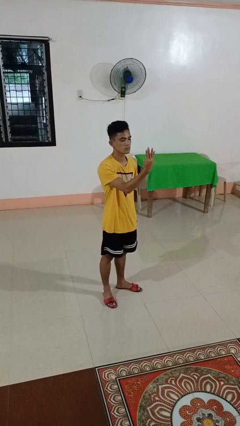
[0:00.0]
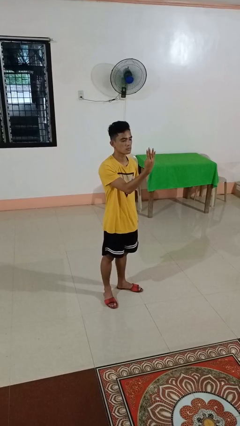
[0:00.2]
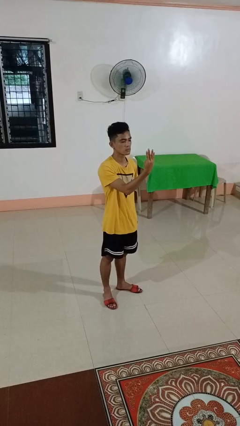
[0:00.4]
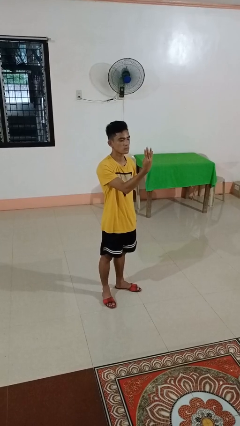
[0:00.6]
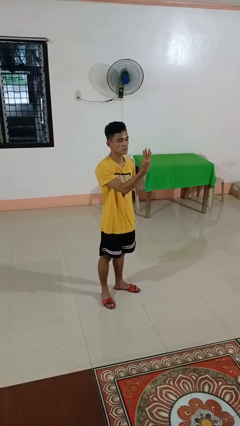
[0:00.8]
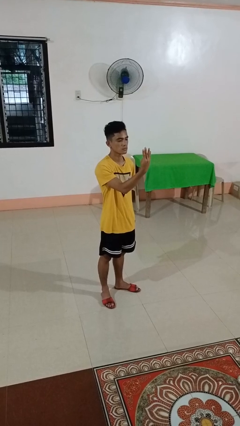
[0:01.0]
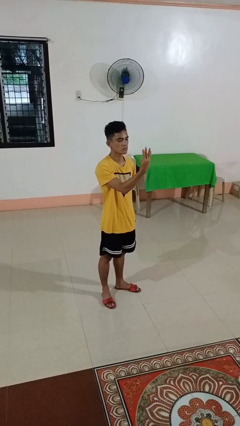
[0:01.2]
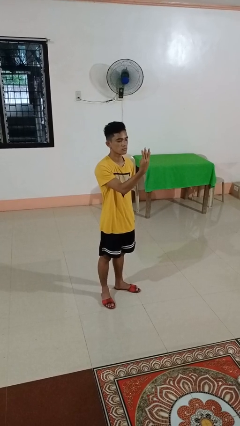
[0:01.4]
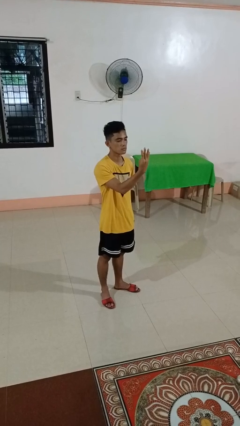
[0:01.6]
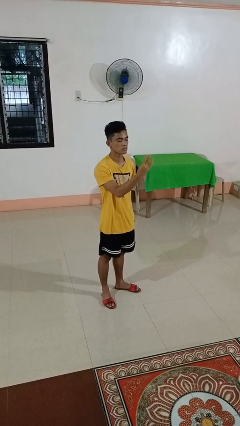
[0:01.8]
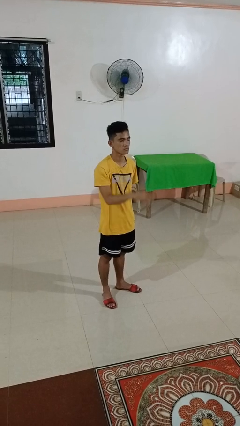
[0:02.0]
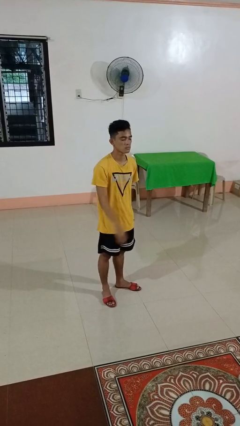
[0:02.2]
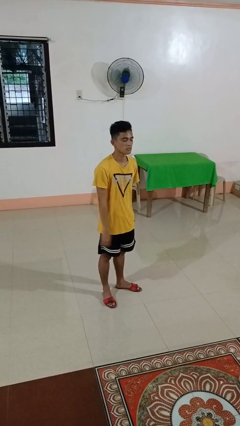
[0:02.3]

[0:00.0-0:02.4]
person gestures number four

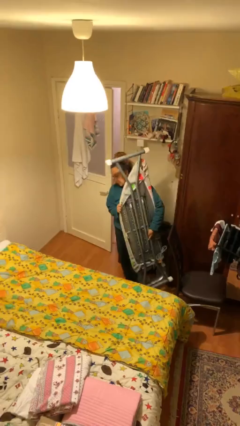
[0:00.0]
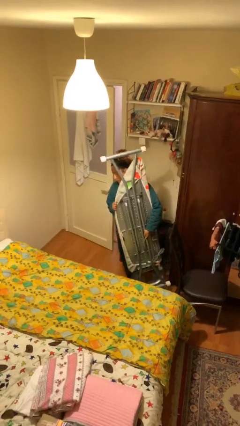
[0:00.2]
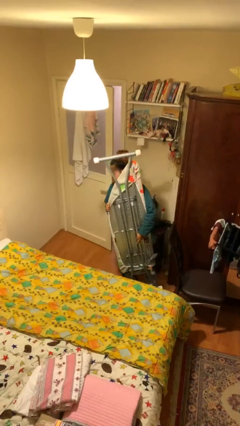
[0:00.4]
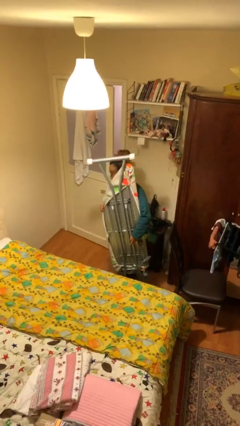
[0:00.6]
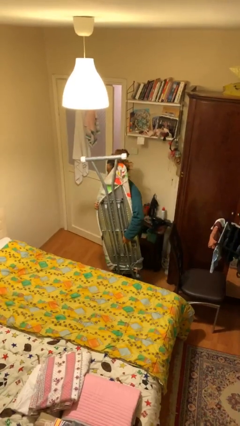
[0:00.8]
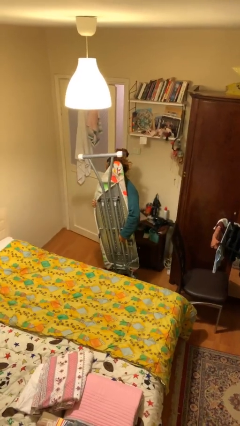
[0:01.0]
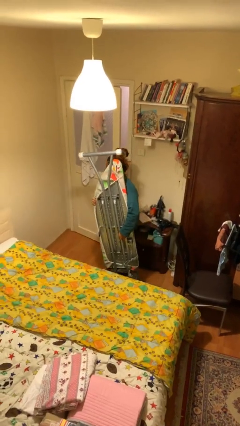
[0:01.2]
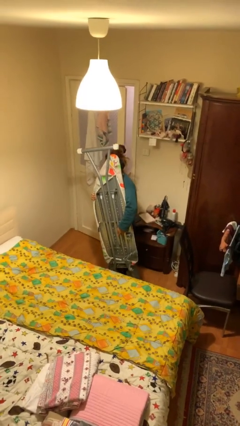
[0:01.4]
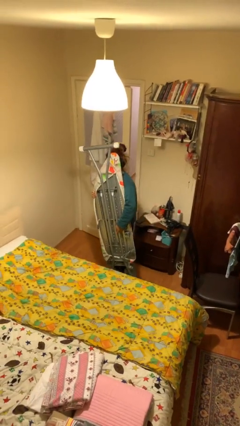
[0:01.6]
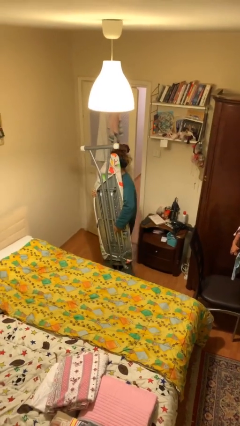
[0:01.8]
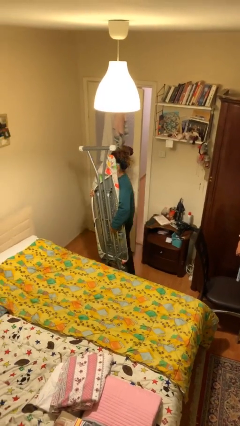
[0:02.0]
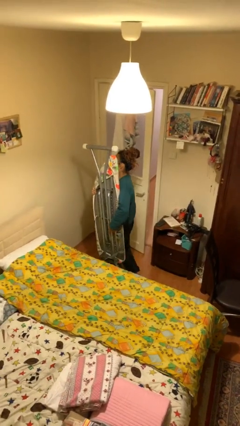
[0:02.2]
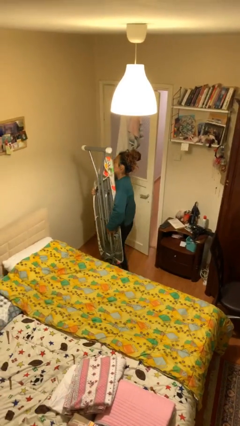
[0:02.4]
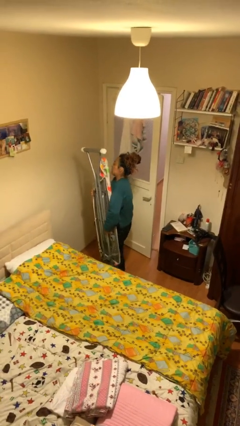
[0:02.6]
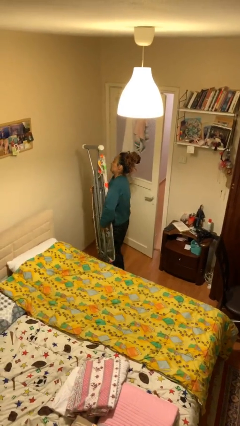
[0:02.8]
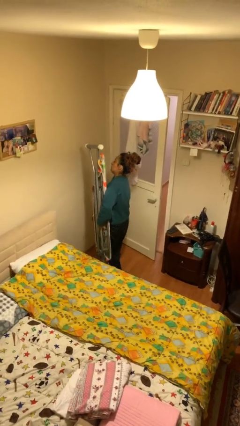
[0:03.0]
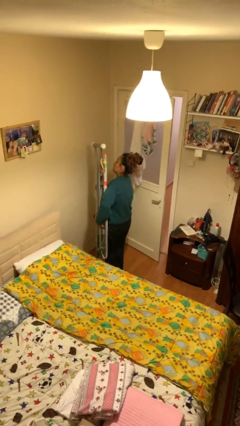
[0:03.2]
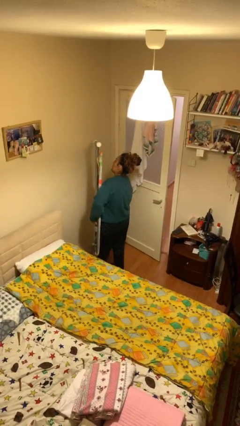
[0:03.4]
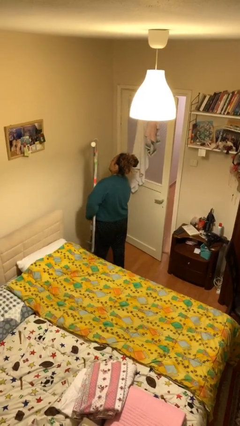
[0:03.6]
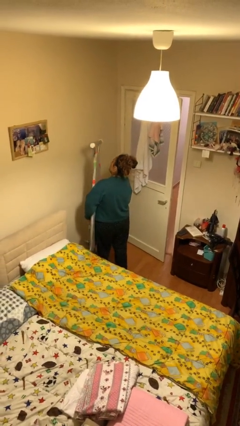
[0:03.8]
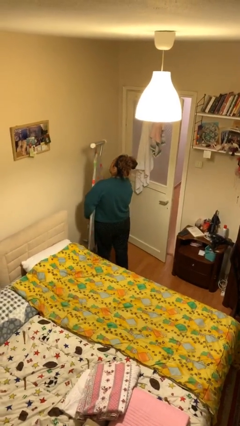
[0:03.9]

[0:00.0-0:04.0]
person carries heavy object

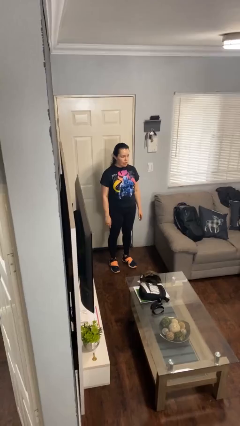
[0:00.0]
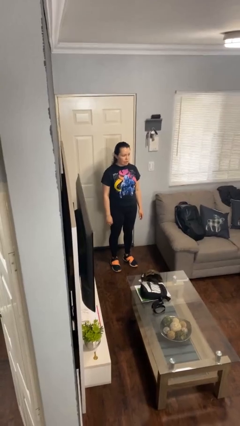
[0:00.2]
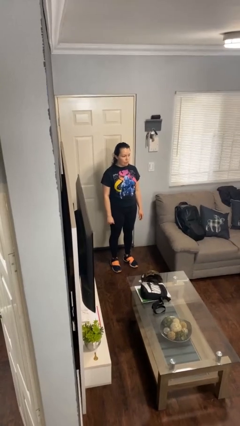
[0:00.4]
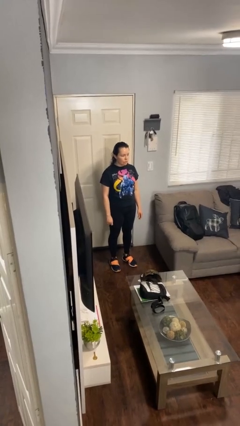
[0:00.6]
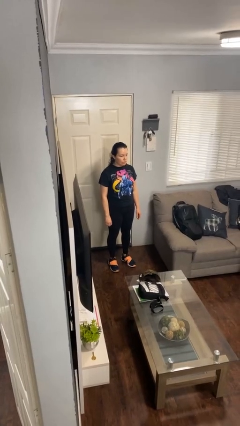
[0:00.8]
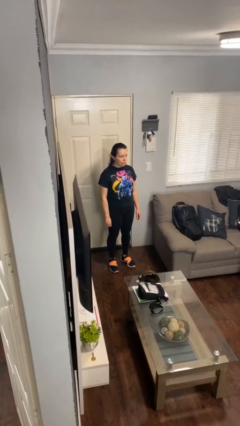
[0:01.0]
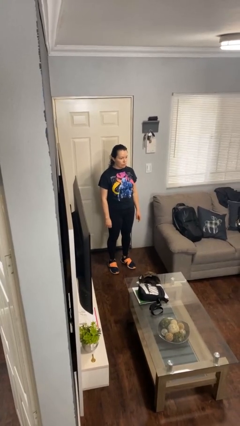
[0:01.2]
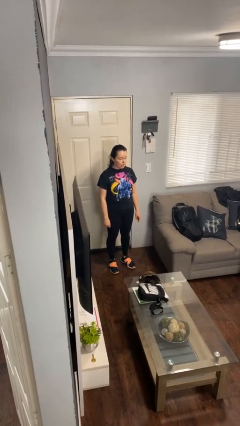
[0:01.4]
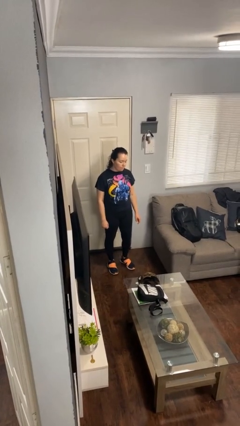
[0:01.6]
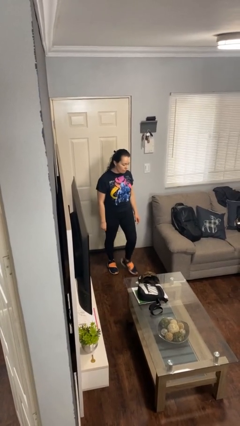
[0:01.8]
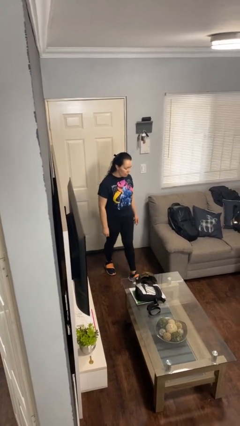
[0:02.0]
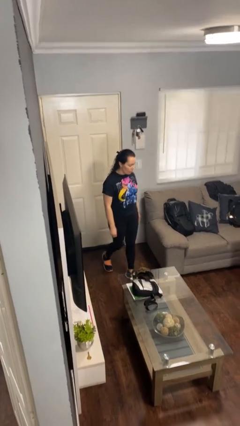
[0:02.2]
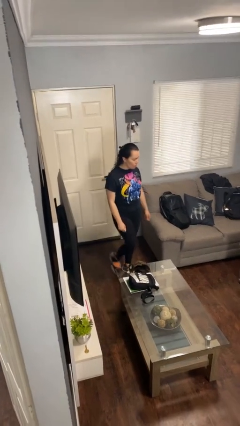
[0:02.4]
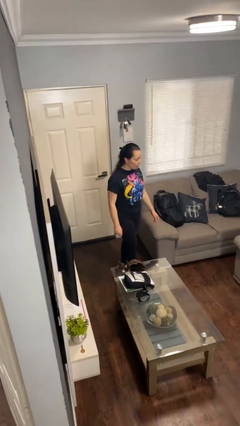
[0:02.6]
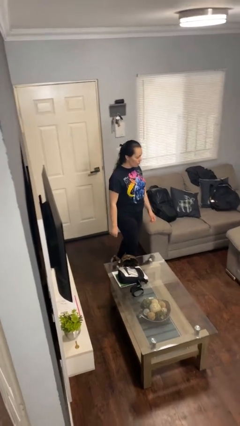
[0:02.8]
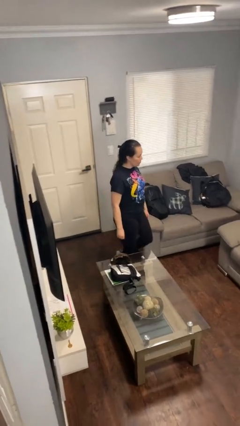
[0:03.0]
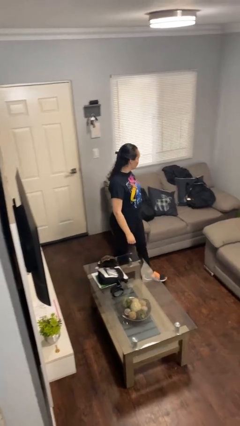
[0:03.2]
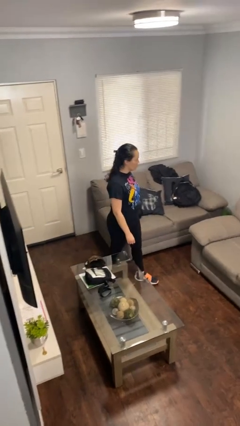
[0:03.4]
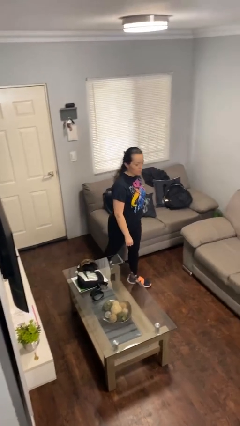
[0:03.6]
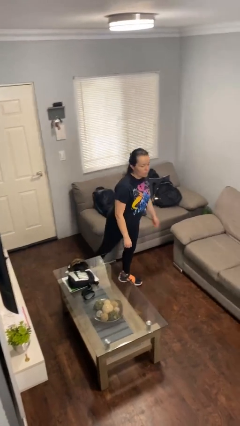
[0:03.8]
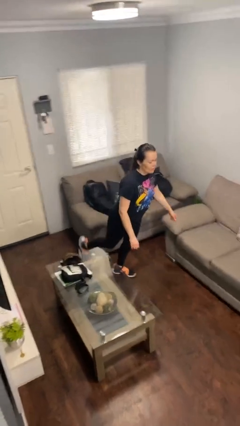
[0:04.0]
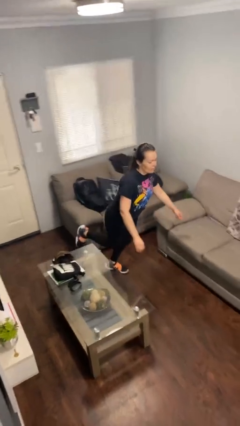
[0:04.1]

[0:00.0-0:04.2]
person trips on object on floor

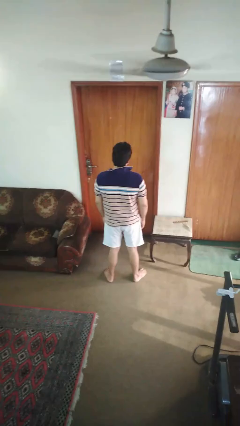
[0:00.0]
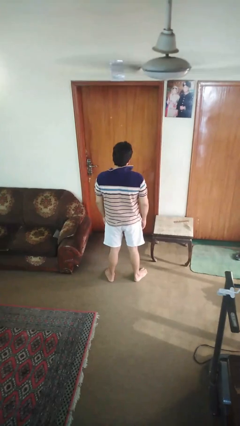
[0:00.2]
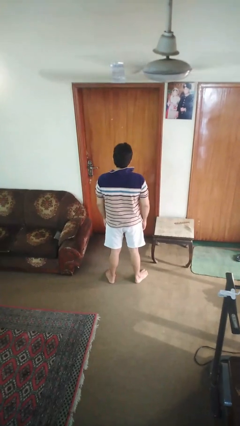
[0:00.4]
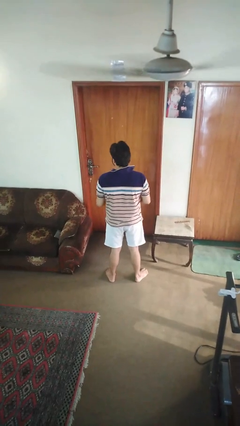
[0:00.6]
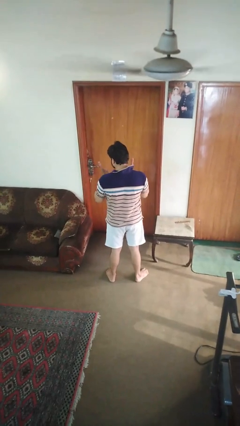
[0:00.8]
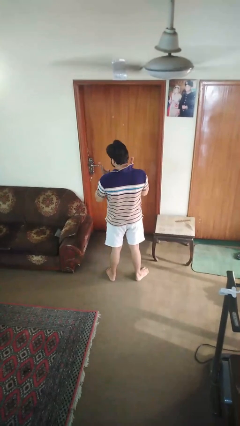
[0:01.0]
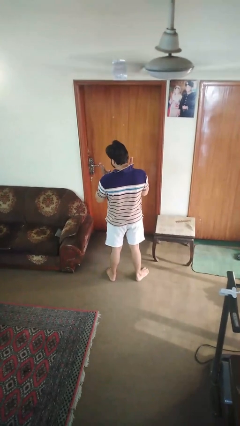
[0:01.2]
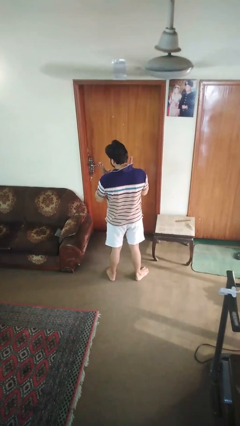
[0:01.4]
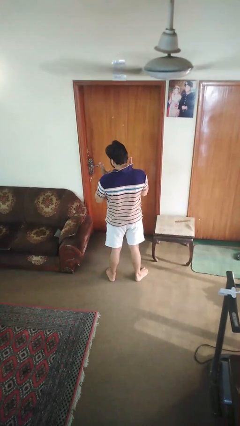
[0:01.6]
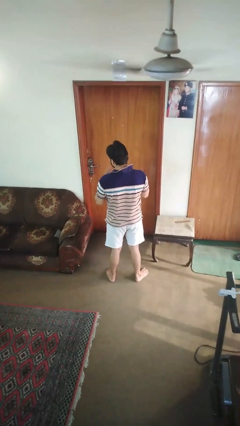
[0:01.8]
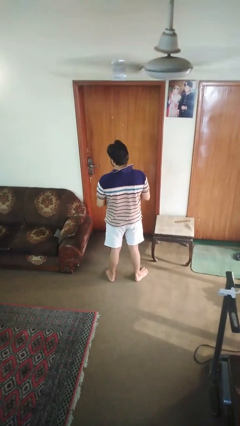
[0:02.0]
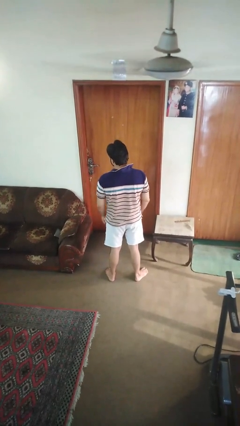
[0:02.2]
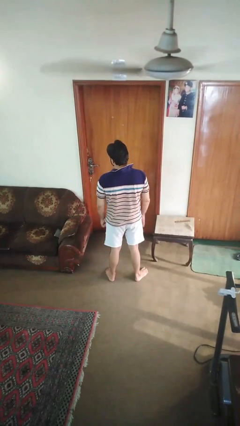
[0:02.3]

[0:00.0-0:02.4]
person shrugs

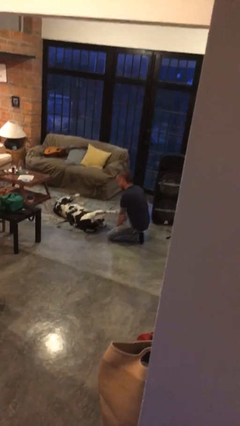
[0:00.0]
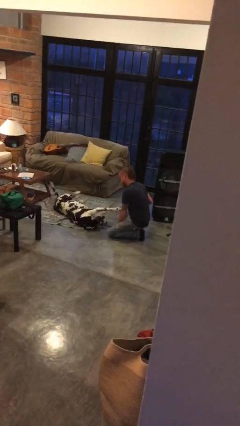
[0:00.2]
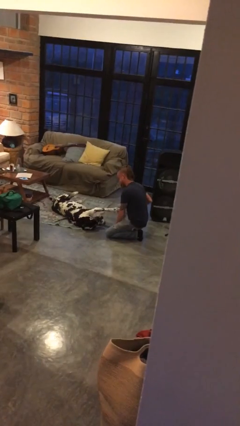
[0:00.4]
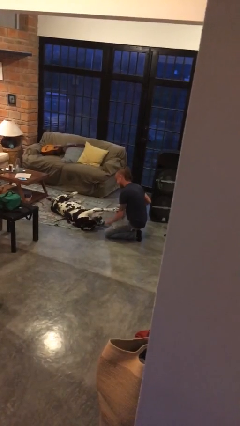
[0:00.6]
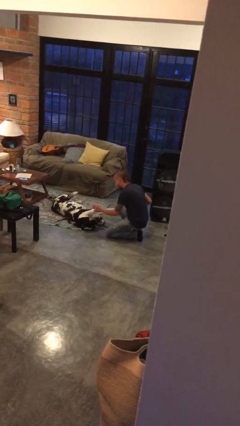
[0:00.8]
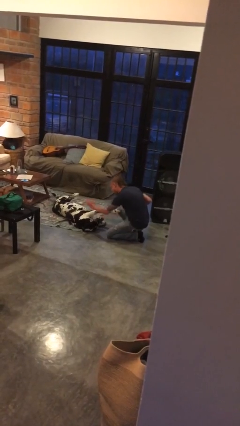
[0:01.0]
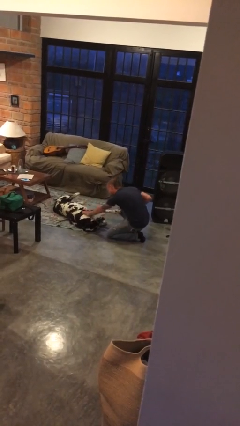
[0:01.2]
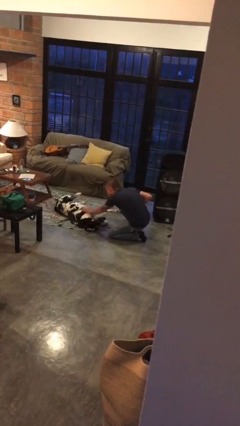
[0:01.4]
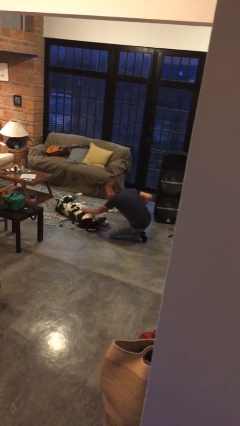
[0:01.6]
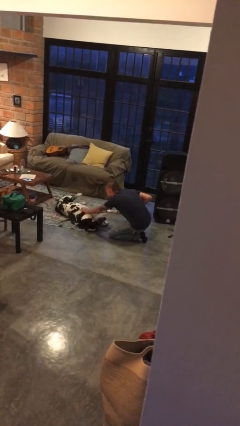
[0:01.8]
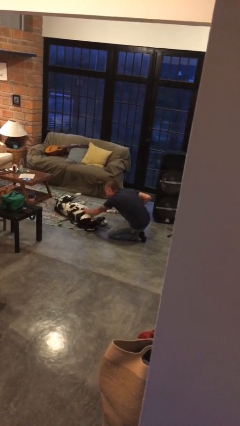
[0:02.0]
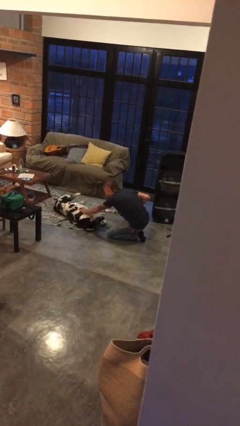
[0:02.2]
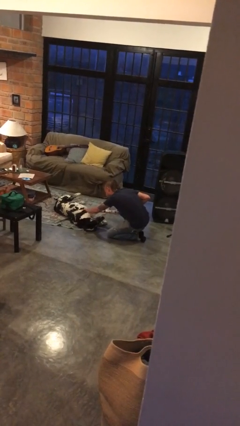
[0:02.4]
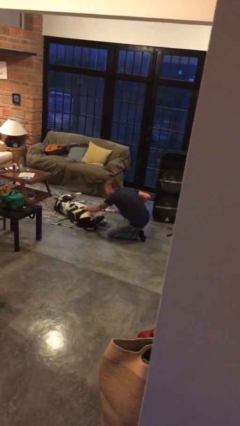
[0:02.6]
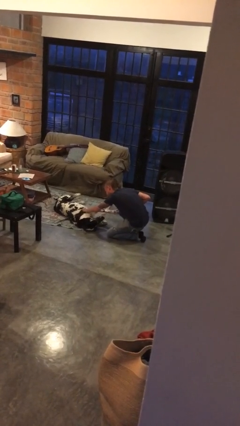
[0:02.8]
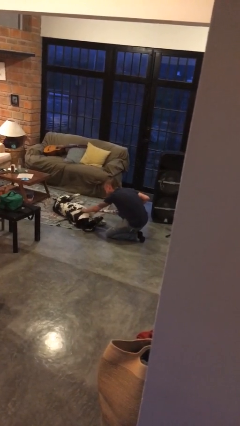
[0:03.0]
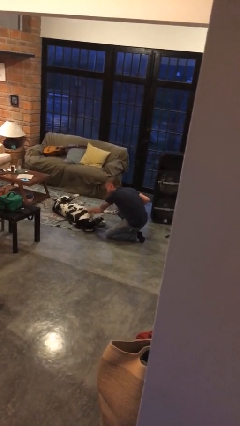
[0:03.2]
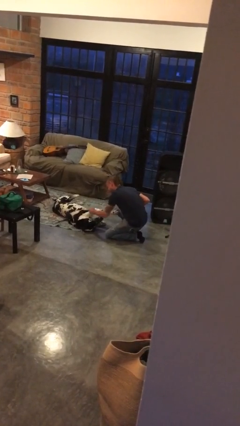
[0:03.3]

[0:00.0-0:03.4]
person pets dog

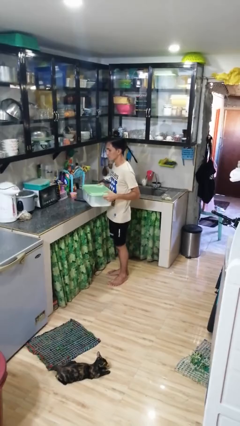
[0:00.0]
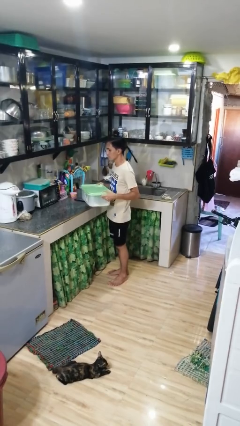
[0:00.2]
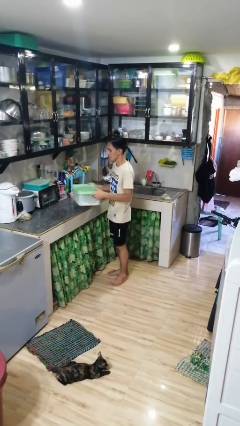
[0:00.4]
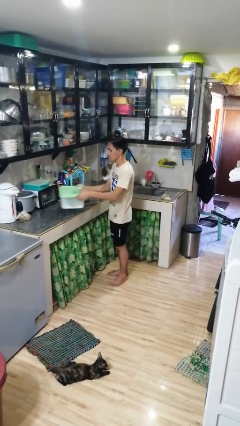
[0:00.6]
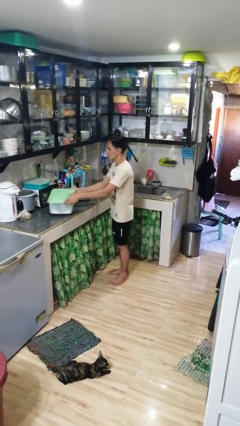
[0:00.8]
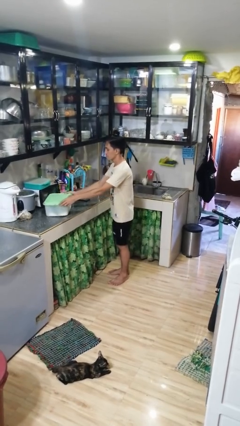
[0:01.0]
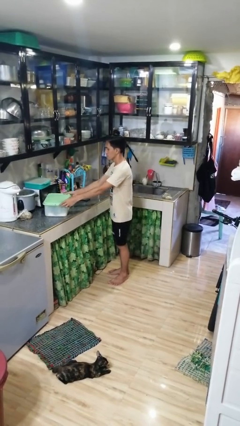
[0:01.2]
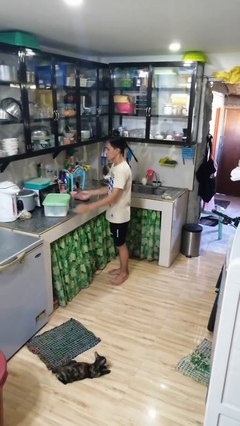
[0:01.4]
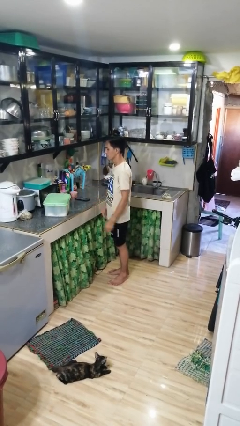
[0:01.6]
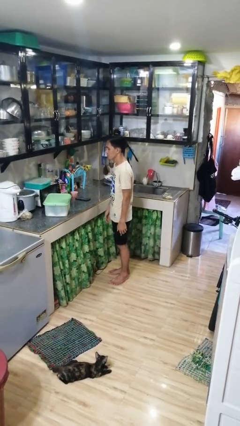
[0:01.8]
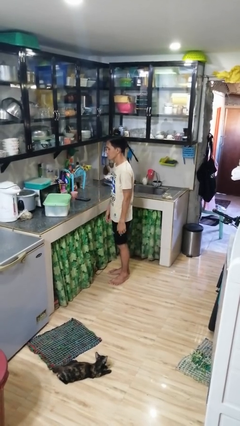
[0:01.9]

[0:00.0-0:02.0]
person puts down object on countertop
